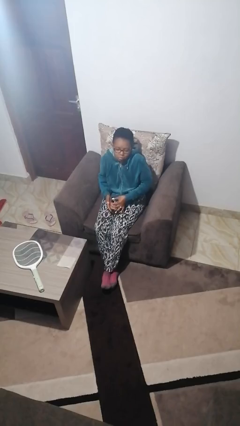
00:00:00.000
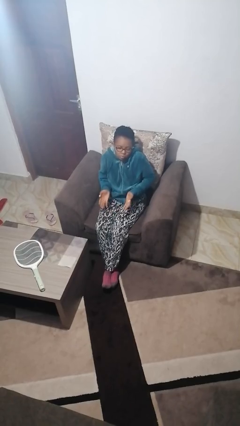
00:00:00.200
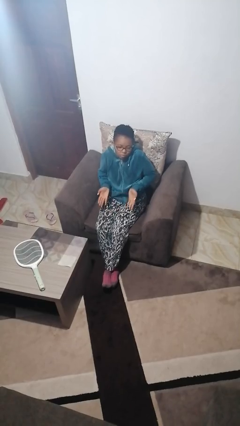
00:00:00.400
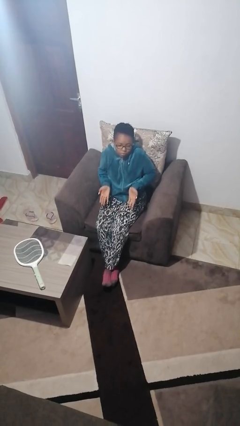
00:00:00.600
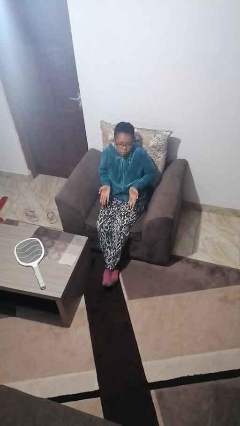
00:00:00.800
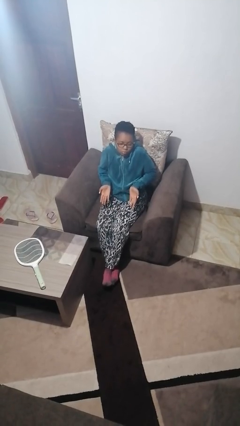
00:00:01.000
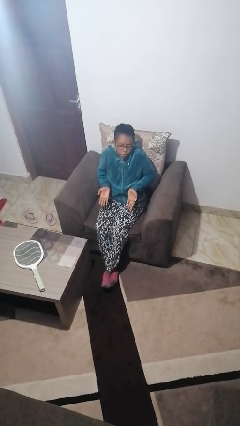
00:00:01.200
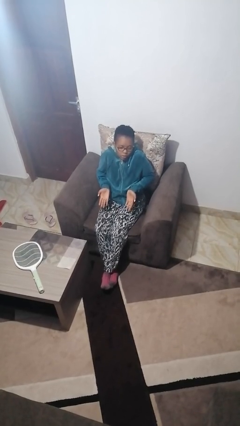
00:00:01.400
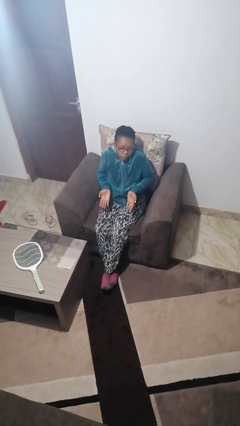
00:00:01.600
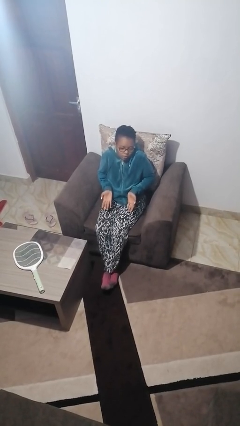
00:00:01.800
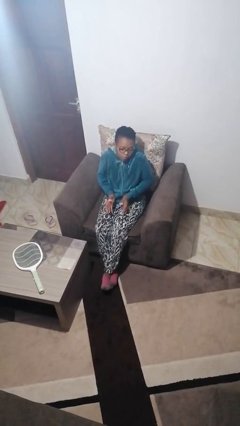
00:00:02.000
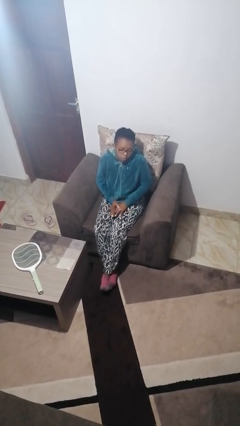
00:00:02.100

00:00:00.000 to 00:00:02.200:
person shrugs

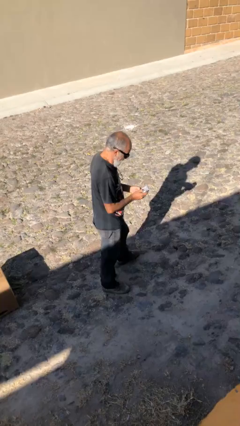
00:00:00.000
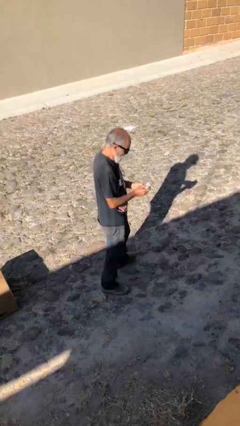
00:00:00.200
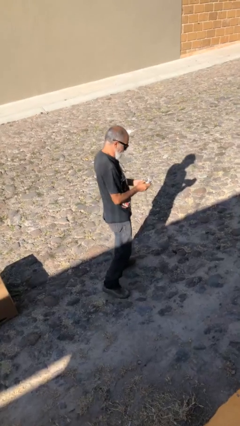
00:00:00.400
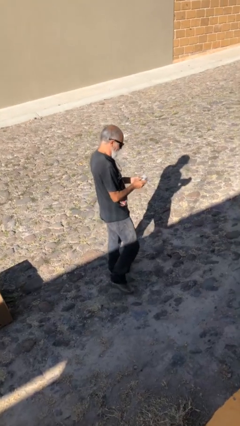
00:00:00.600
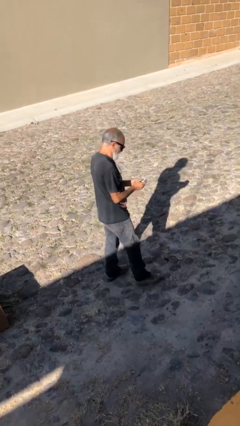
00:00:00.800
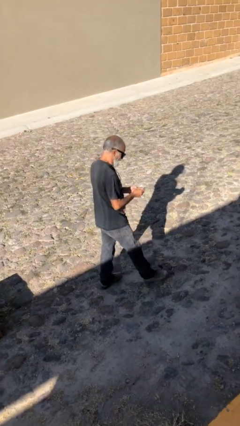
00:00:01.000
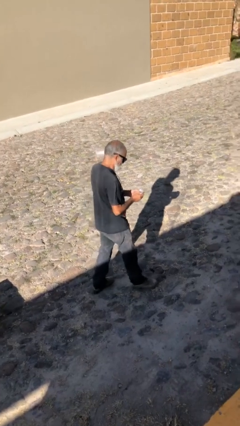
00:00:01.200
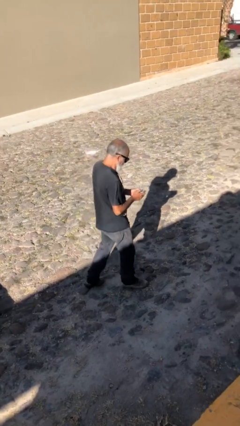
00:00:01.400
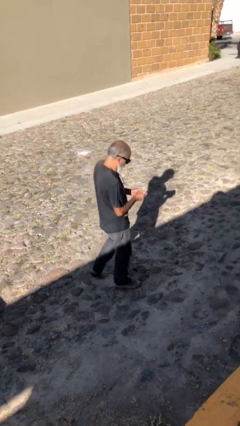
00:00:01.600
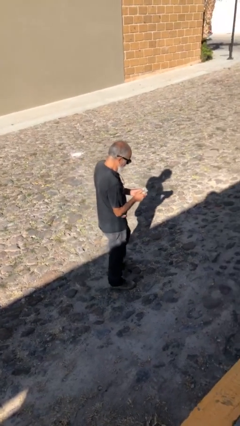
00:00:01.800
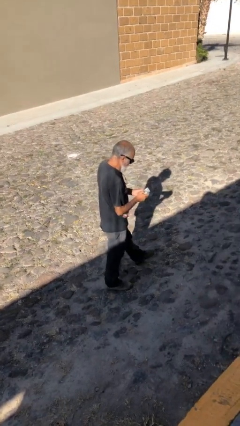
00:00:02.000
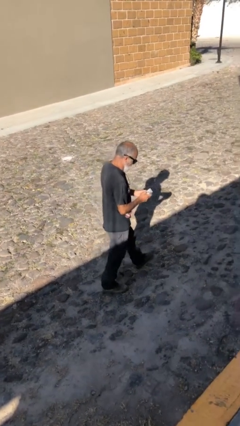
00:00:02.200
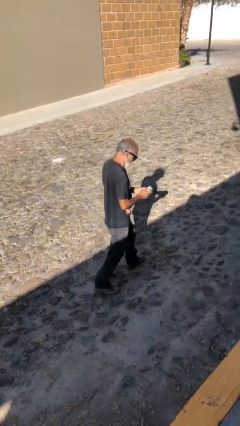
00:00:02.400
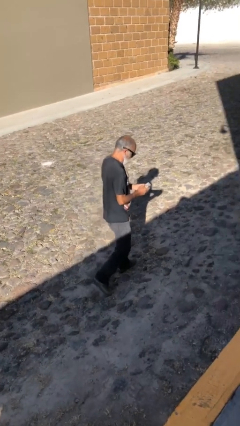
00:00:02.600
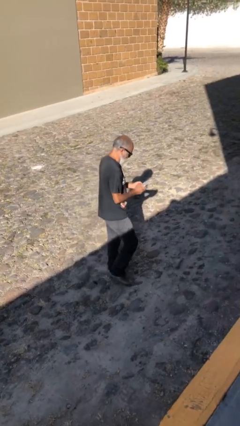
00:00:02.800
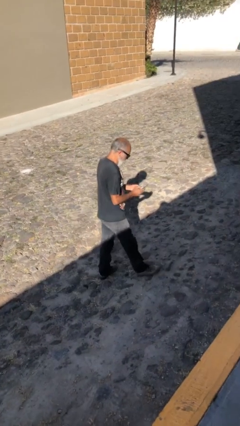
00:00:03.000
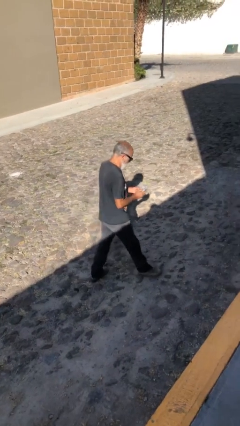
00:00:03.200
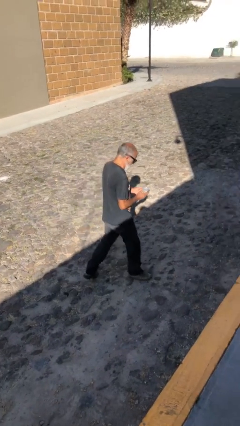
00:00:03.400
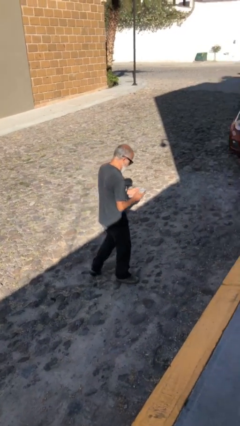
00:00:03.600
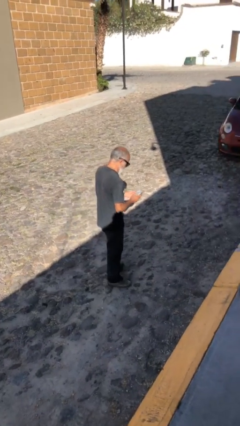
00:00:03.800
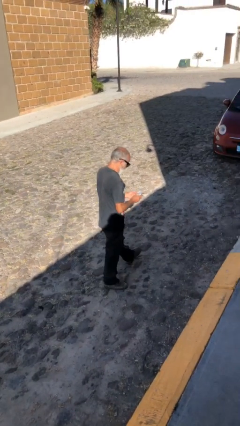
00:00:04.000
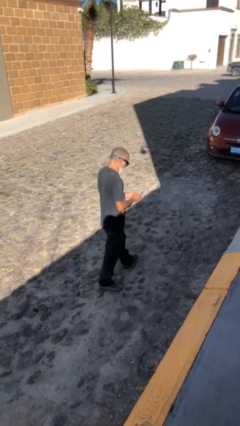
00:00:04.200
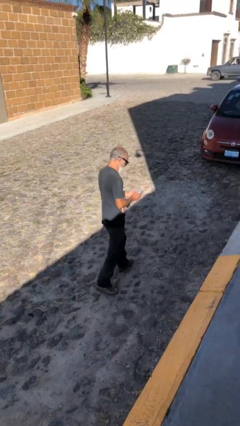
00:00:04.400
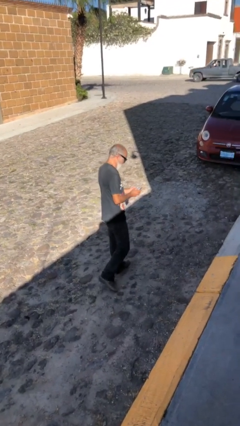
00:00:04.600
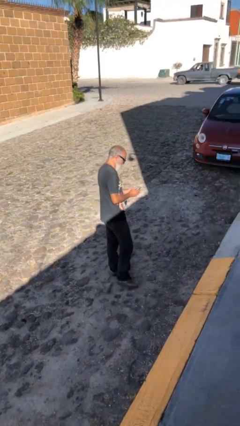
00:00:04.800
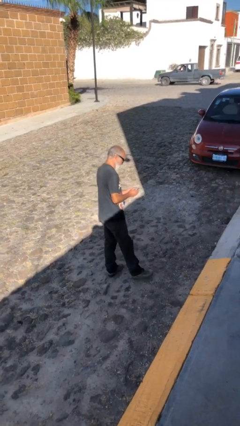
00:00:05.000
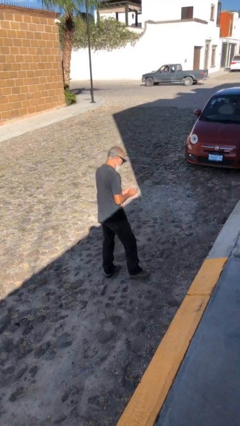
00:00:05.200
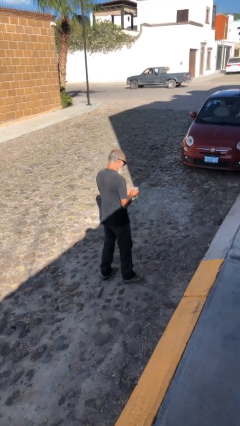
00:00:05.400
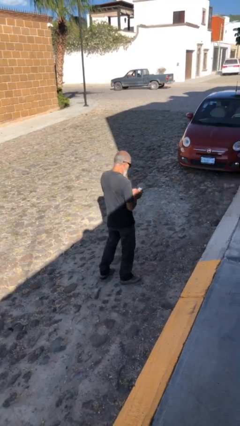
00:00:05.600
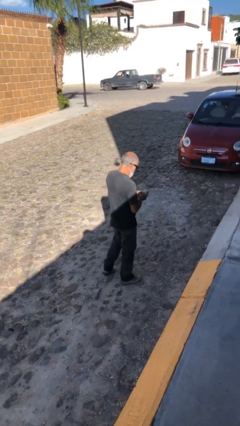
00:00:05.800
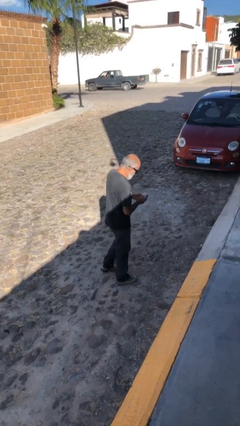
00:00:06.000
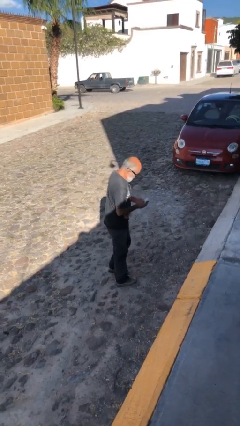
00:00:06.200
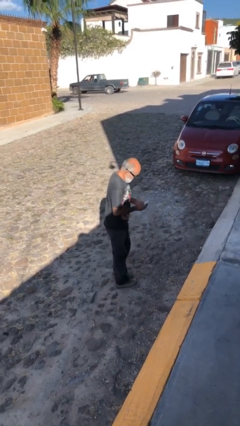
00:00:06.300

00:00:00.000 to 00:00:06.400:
person texts on phone

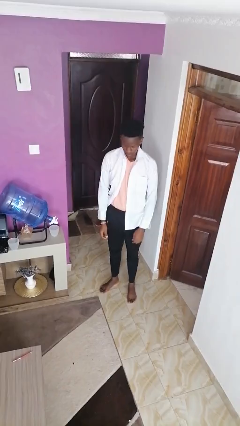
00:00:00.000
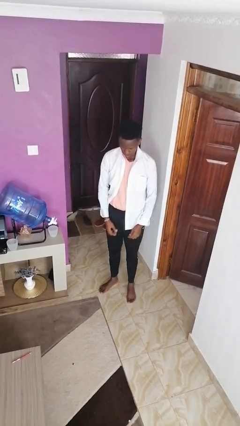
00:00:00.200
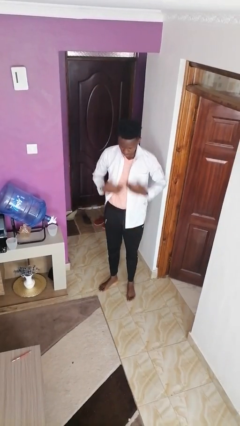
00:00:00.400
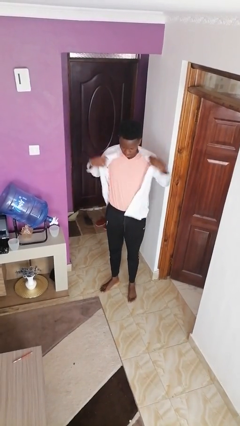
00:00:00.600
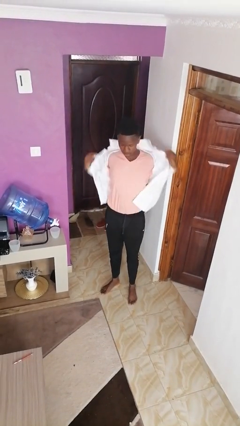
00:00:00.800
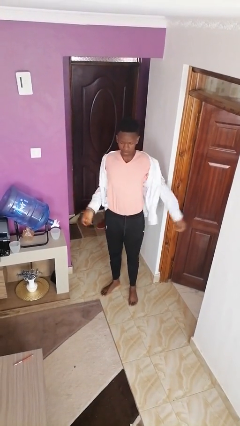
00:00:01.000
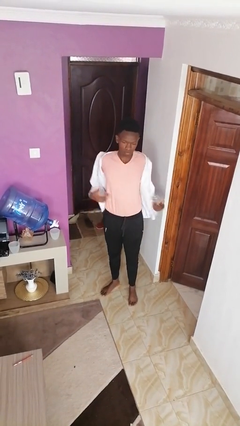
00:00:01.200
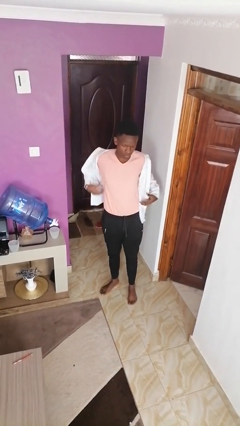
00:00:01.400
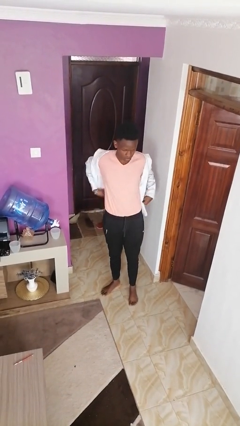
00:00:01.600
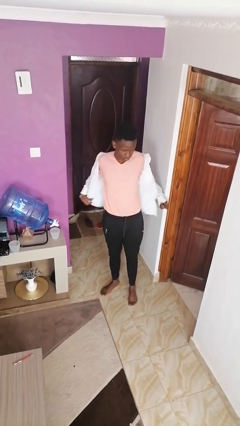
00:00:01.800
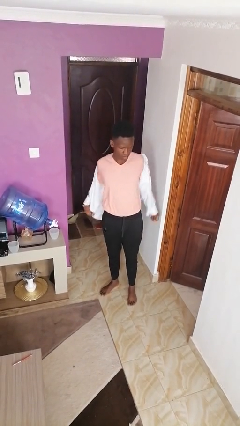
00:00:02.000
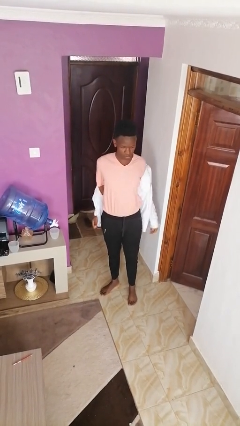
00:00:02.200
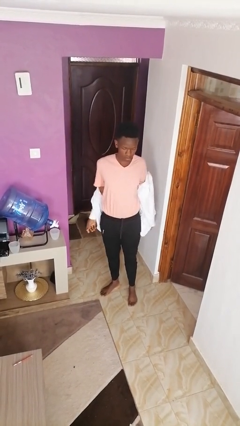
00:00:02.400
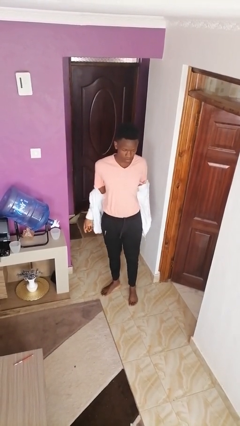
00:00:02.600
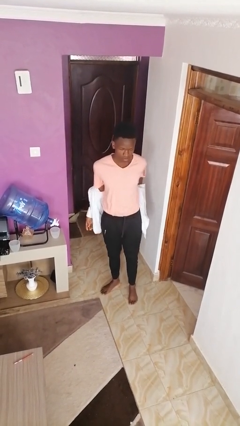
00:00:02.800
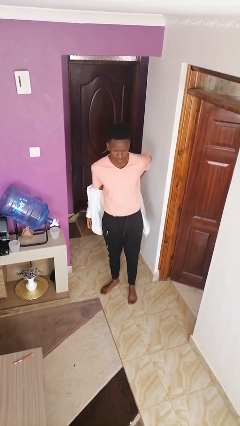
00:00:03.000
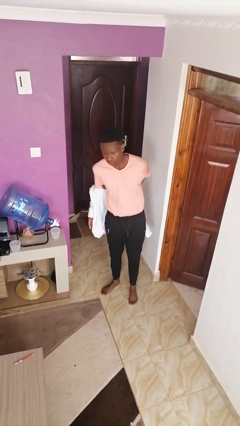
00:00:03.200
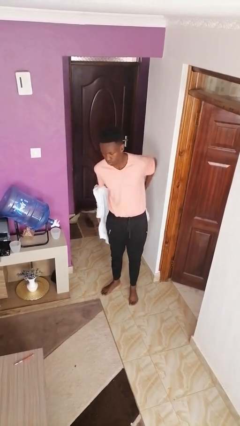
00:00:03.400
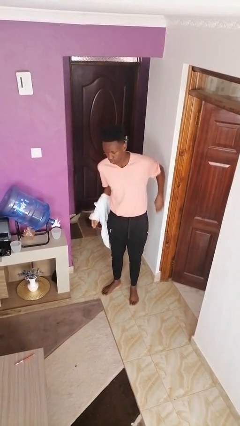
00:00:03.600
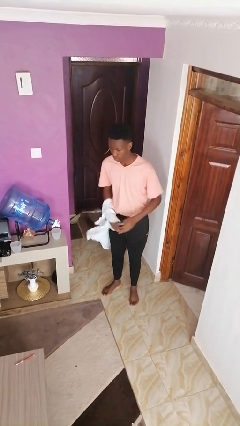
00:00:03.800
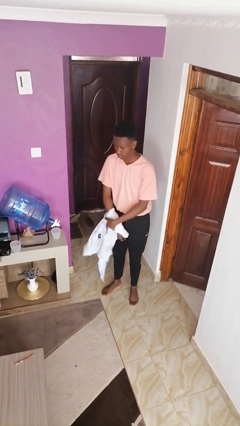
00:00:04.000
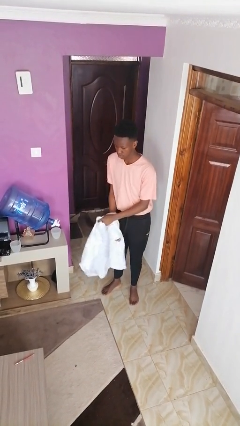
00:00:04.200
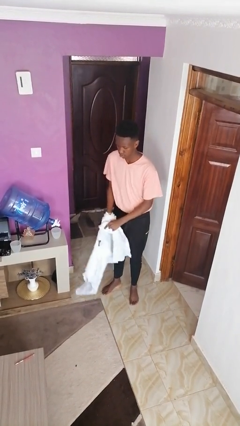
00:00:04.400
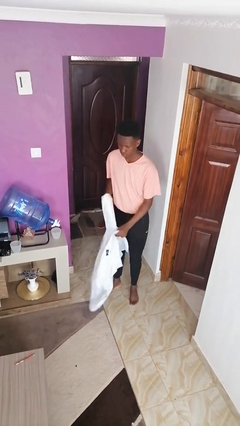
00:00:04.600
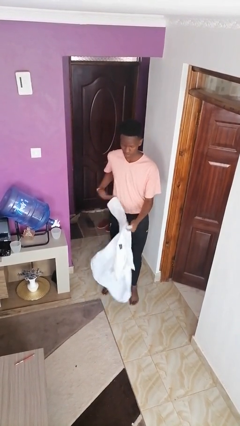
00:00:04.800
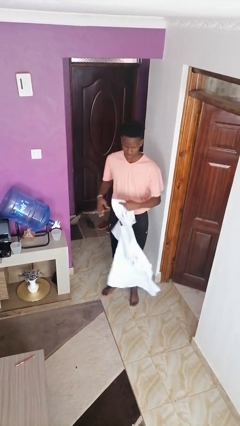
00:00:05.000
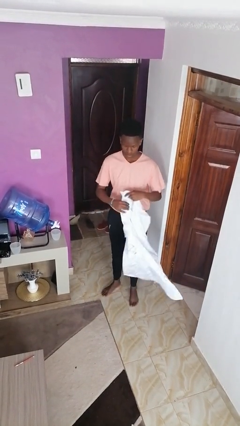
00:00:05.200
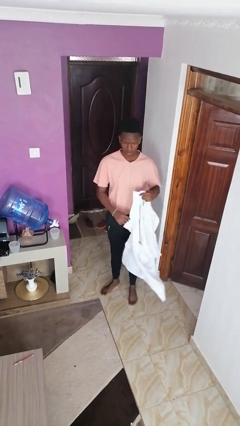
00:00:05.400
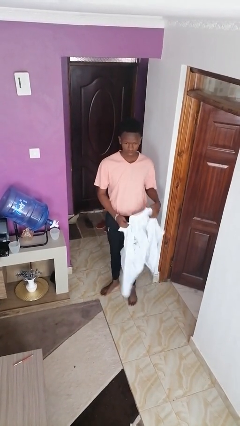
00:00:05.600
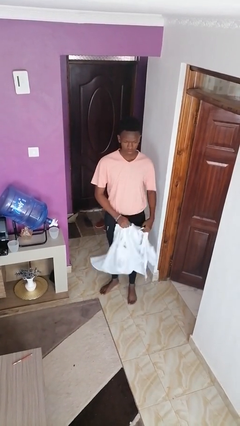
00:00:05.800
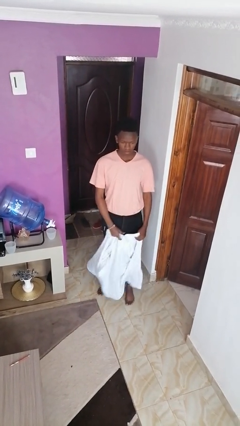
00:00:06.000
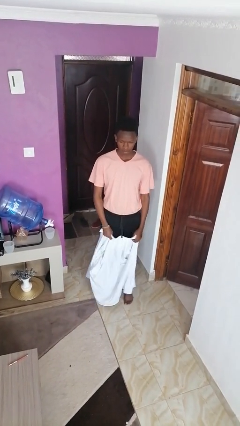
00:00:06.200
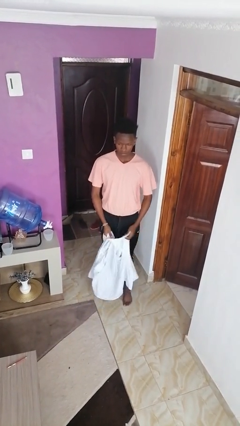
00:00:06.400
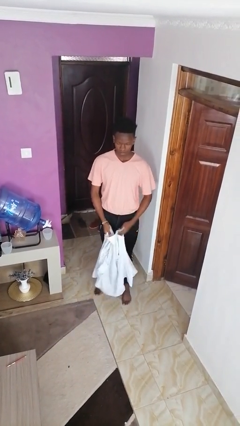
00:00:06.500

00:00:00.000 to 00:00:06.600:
person takes off shirt

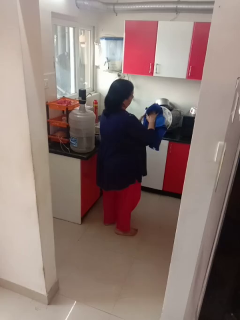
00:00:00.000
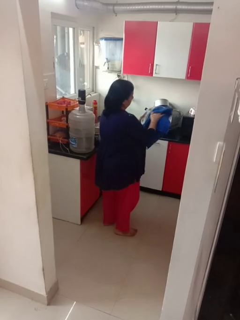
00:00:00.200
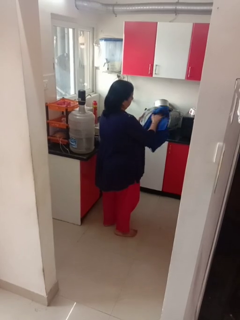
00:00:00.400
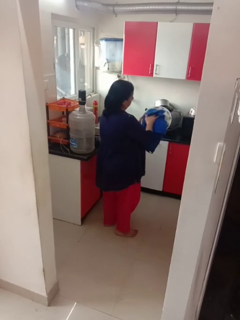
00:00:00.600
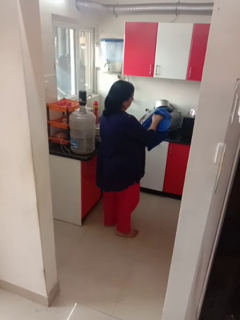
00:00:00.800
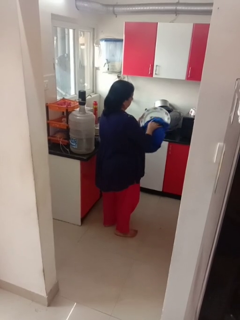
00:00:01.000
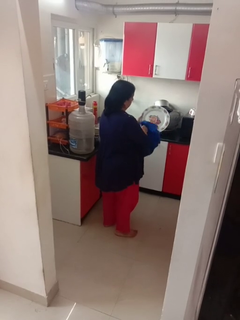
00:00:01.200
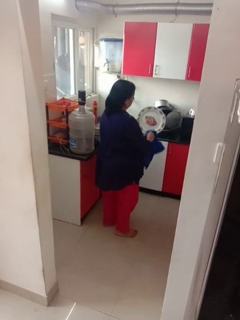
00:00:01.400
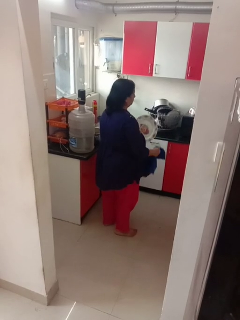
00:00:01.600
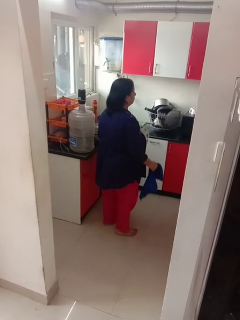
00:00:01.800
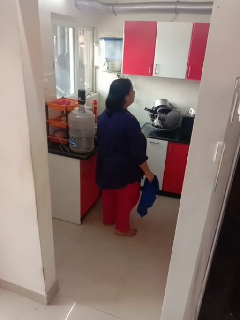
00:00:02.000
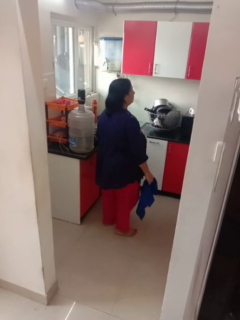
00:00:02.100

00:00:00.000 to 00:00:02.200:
person dries dish

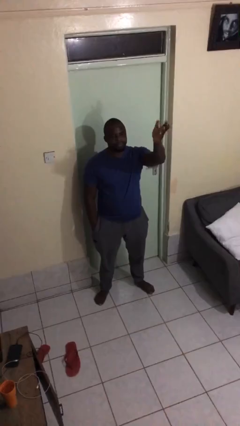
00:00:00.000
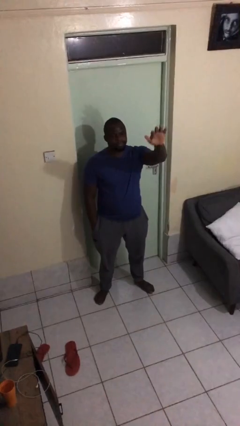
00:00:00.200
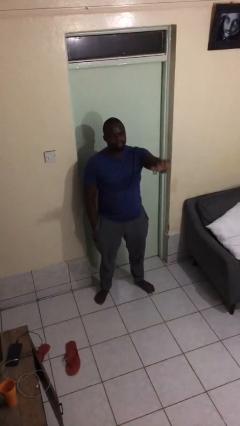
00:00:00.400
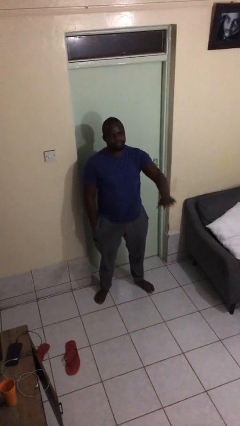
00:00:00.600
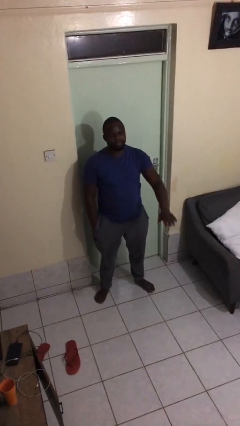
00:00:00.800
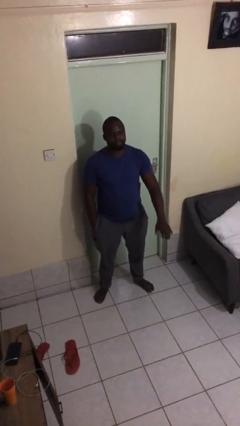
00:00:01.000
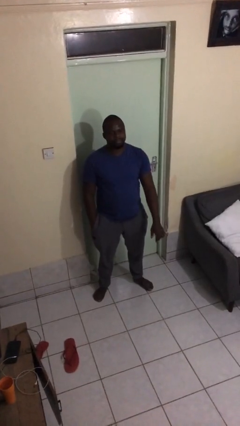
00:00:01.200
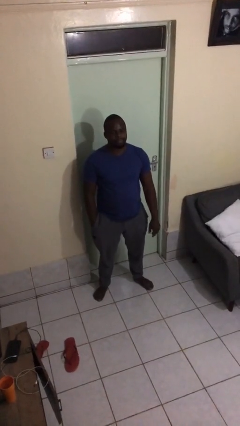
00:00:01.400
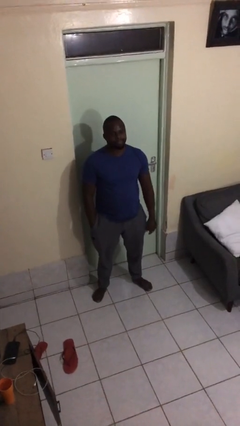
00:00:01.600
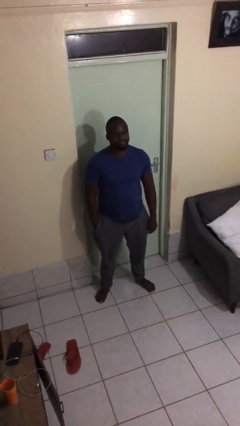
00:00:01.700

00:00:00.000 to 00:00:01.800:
person gestures swipe down
